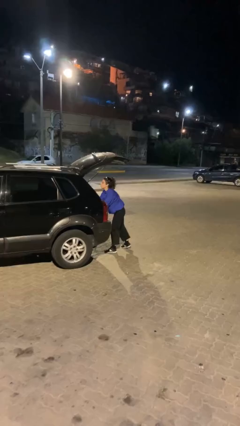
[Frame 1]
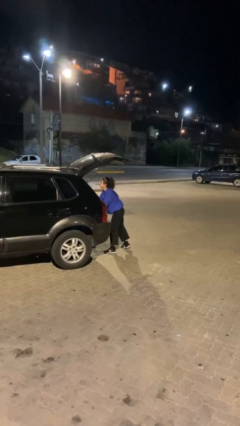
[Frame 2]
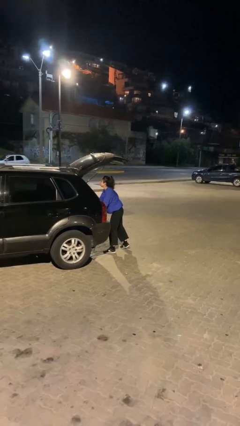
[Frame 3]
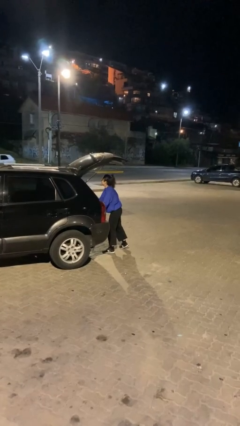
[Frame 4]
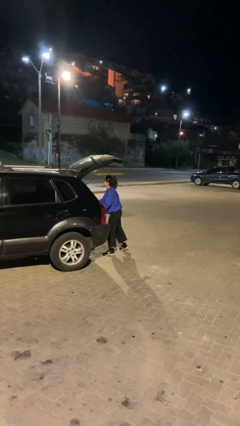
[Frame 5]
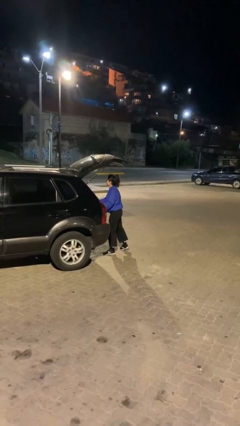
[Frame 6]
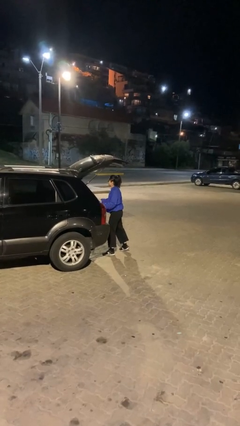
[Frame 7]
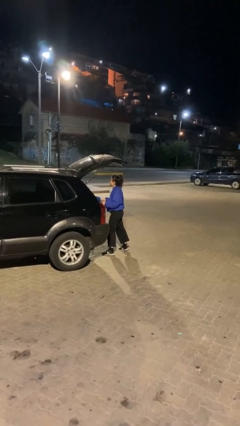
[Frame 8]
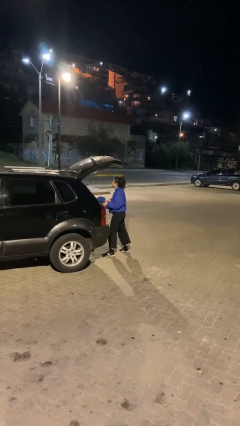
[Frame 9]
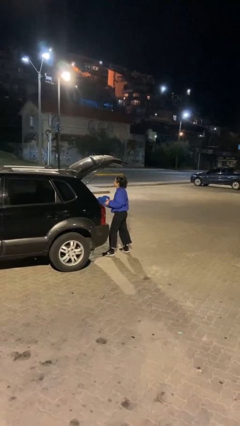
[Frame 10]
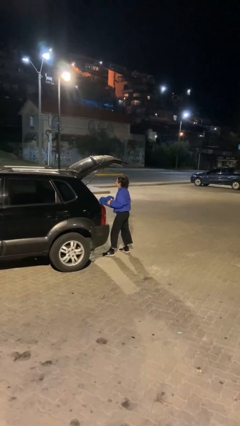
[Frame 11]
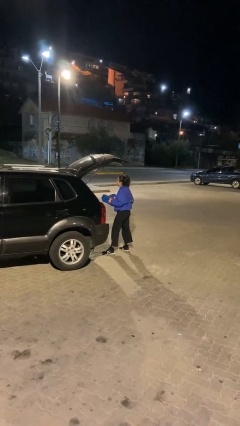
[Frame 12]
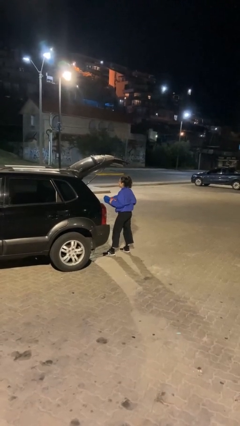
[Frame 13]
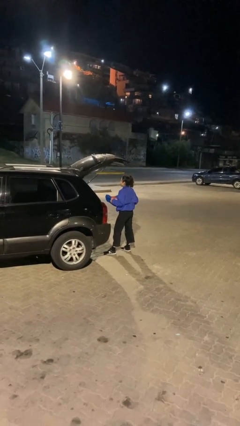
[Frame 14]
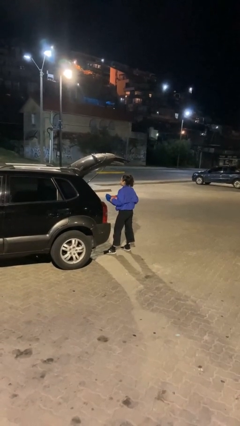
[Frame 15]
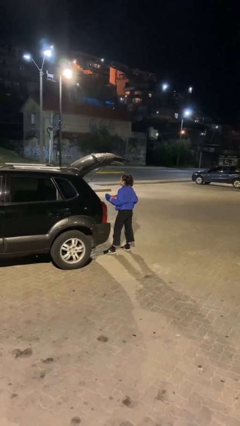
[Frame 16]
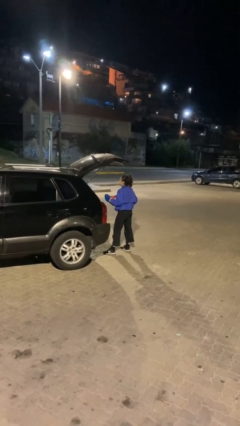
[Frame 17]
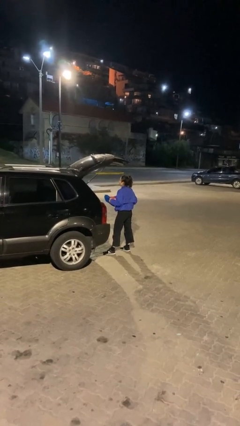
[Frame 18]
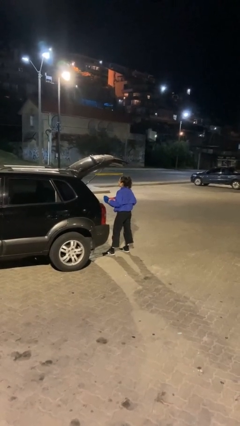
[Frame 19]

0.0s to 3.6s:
person unloads car

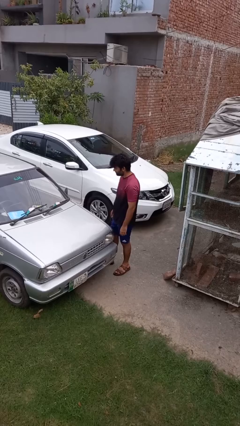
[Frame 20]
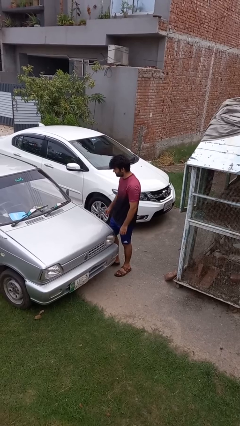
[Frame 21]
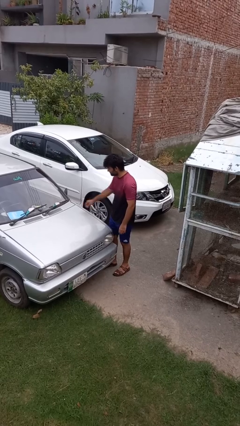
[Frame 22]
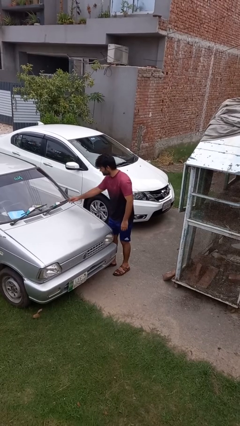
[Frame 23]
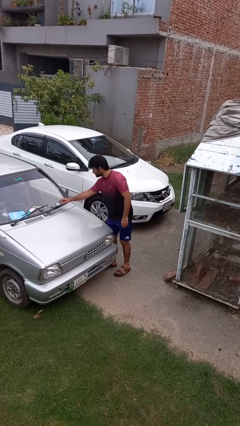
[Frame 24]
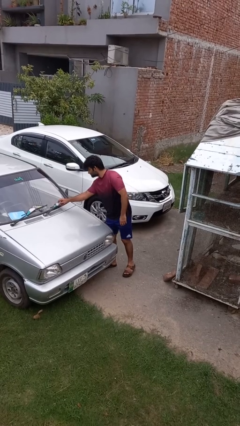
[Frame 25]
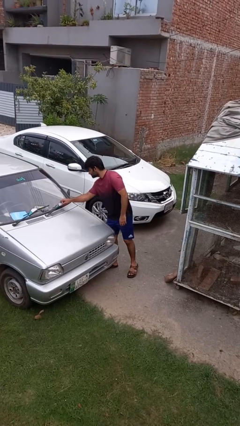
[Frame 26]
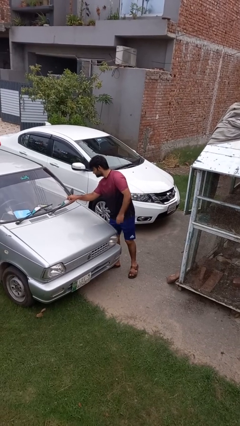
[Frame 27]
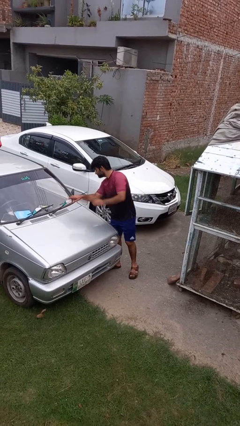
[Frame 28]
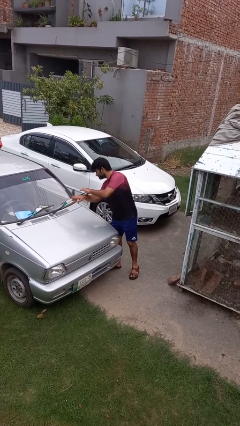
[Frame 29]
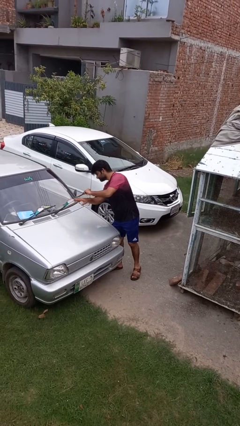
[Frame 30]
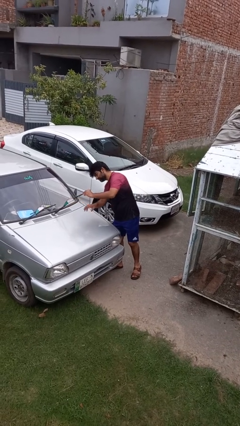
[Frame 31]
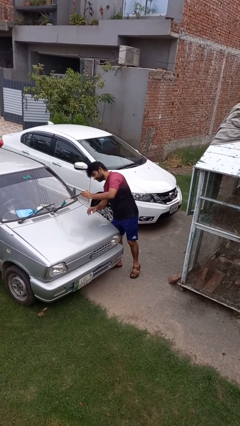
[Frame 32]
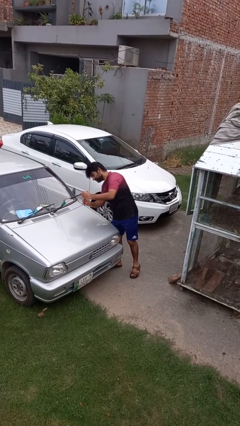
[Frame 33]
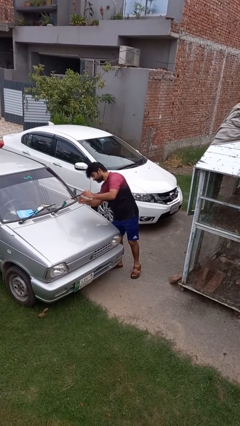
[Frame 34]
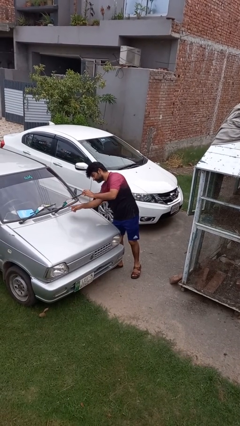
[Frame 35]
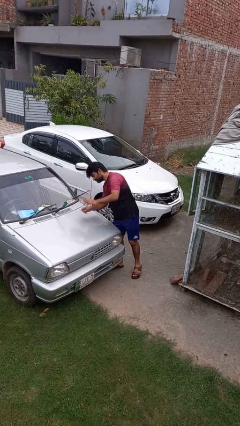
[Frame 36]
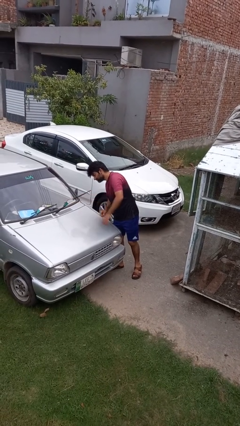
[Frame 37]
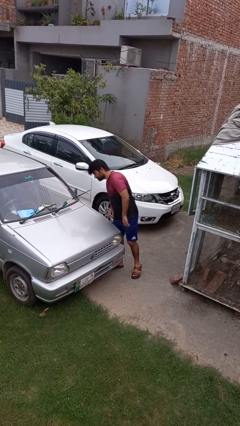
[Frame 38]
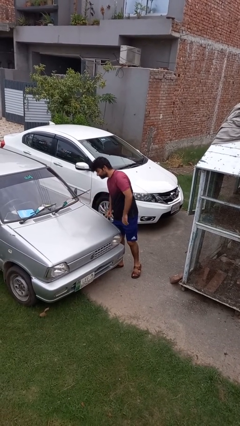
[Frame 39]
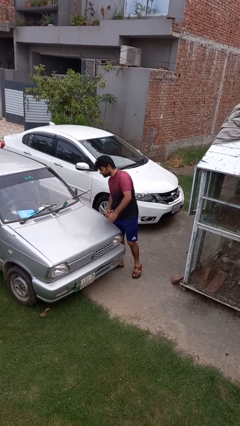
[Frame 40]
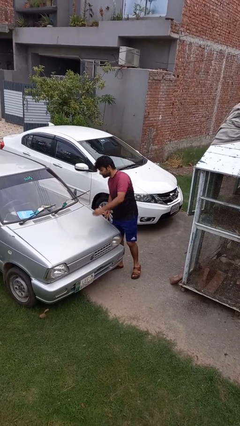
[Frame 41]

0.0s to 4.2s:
person flips up car wipers

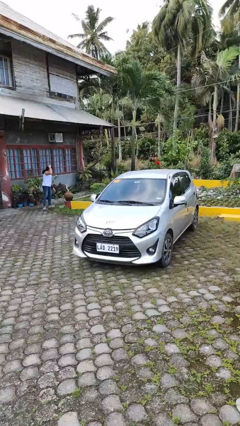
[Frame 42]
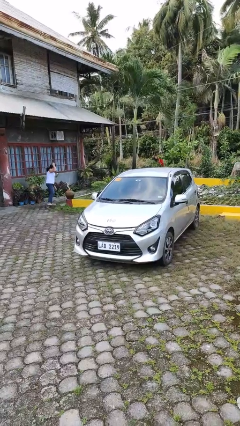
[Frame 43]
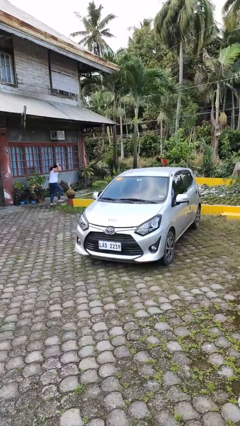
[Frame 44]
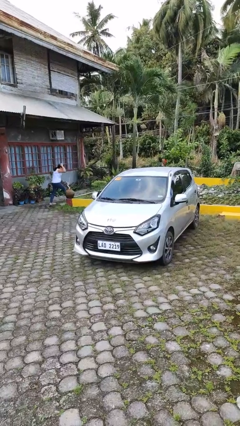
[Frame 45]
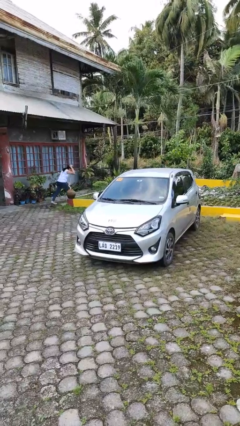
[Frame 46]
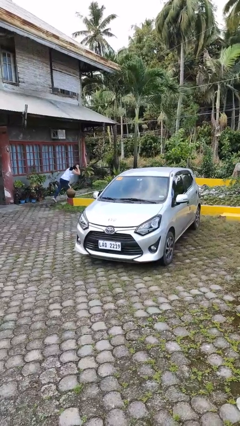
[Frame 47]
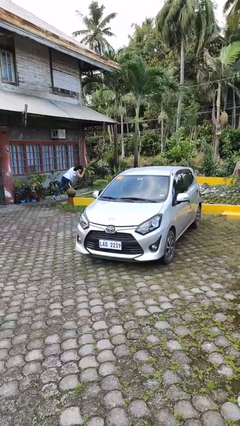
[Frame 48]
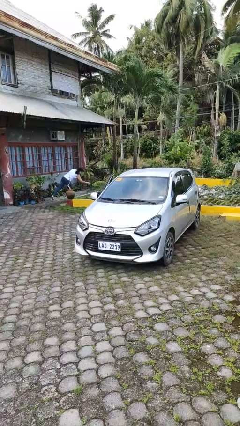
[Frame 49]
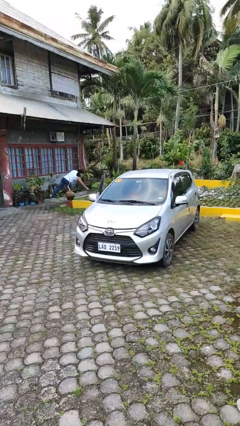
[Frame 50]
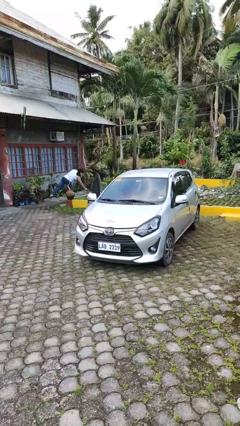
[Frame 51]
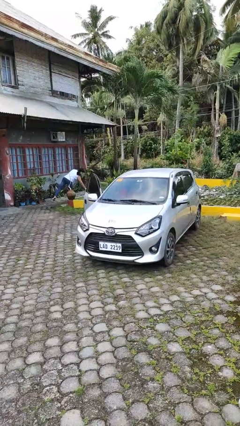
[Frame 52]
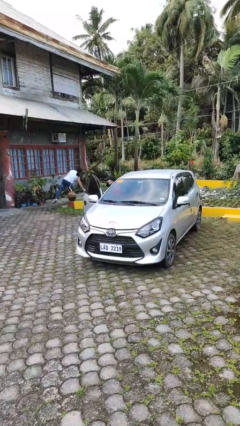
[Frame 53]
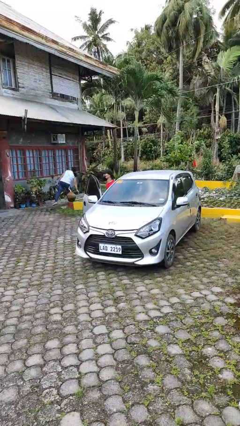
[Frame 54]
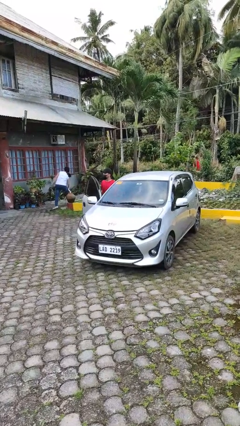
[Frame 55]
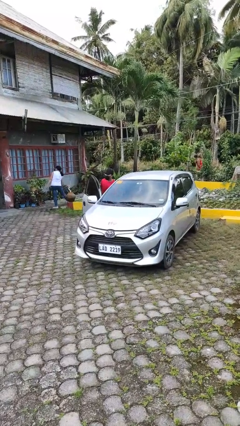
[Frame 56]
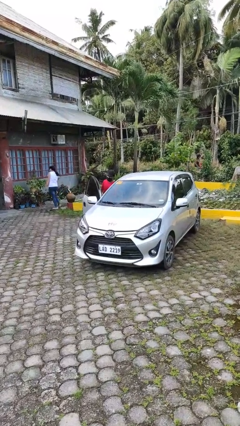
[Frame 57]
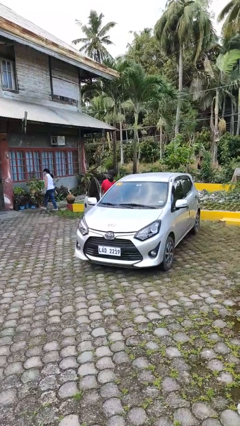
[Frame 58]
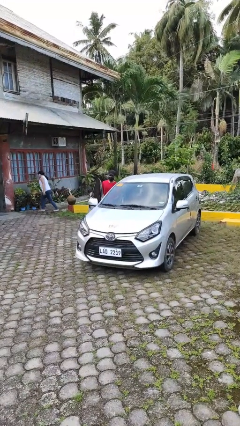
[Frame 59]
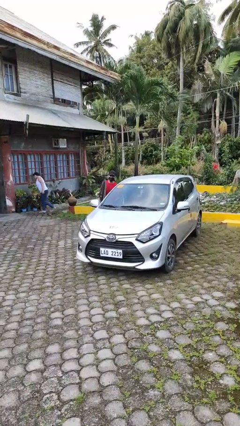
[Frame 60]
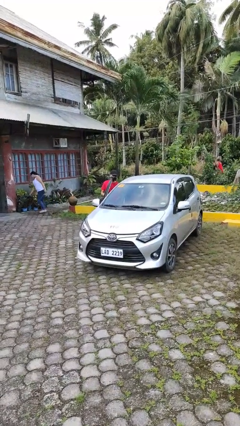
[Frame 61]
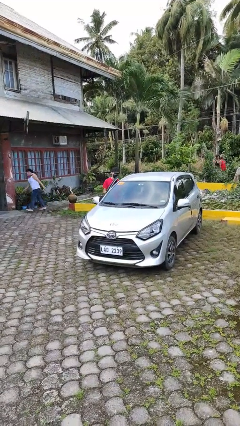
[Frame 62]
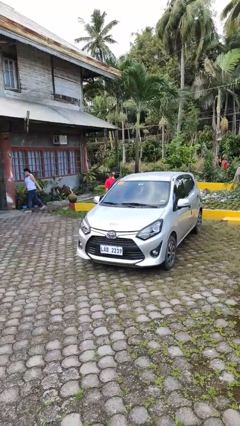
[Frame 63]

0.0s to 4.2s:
car drops off person

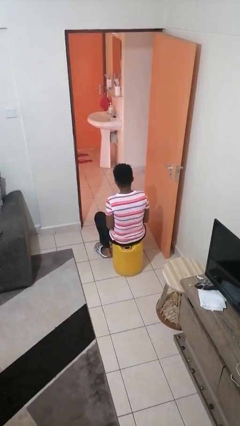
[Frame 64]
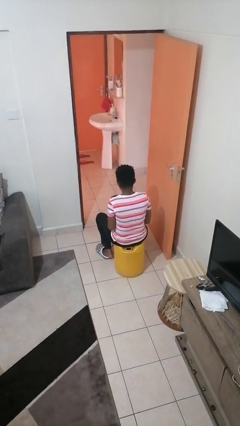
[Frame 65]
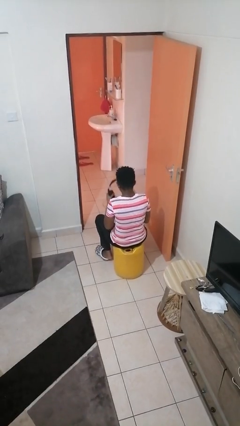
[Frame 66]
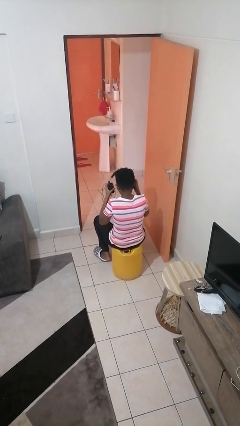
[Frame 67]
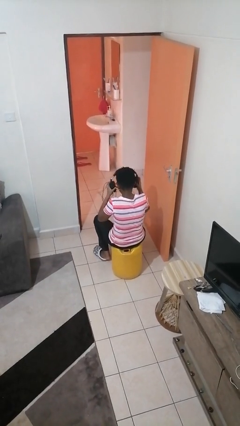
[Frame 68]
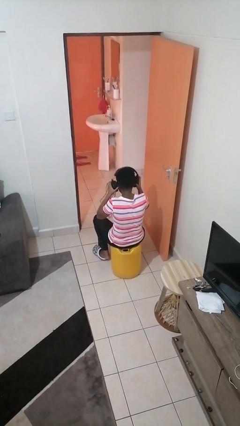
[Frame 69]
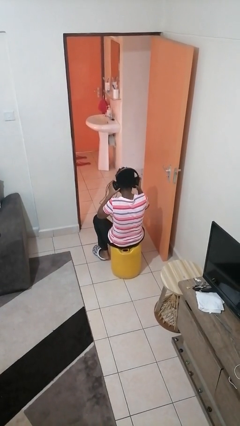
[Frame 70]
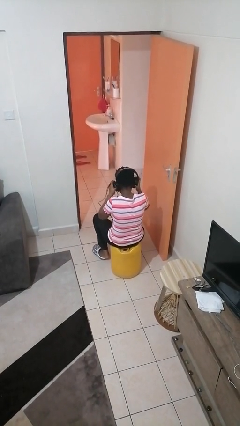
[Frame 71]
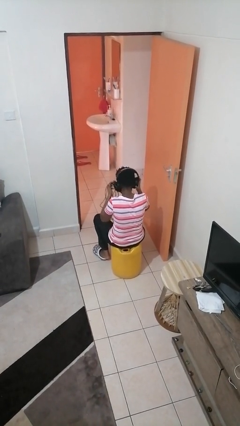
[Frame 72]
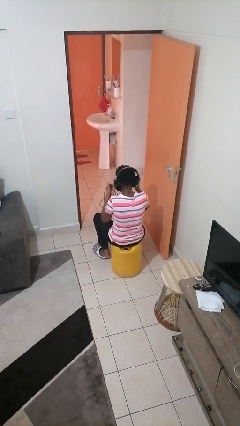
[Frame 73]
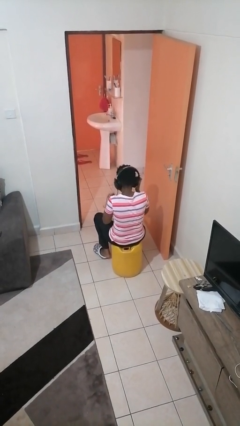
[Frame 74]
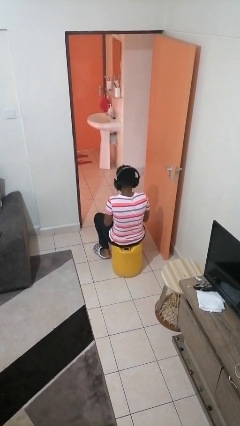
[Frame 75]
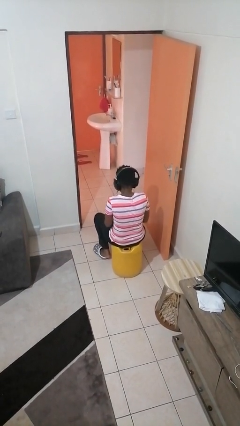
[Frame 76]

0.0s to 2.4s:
person puts on headphones

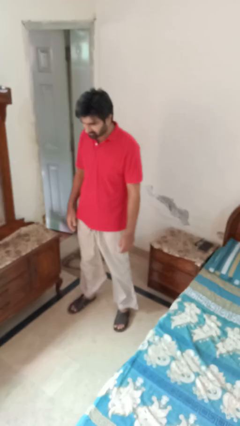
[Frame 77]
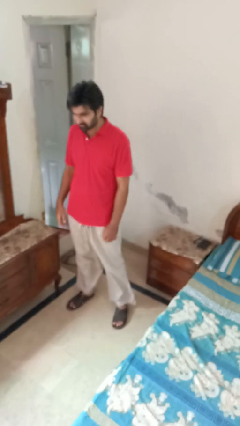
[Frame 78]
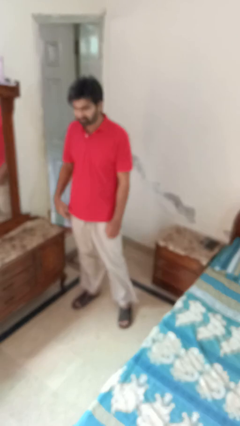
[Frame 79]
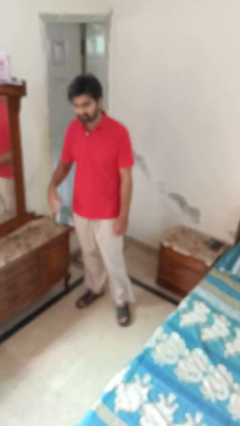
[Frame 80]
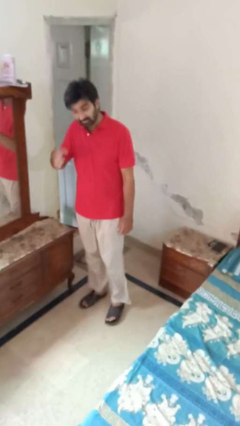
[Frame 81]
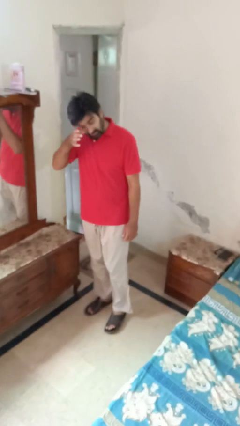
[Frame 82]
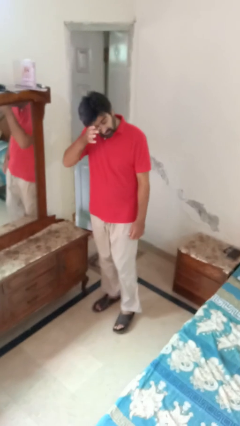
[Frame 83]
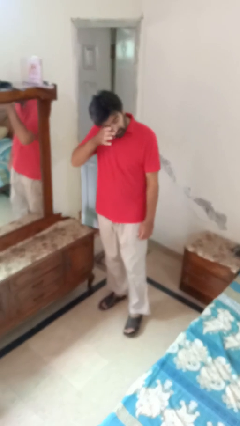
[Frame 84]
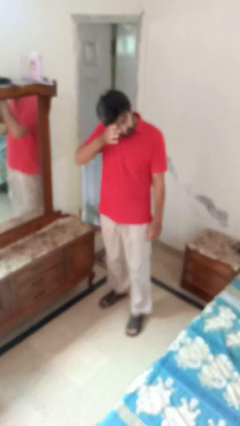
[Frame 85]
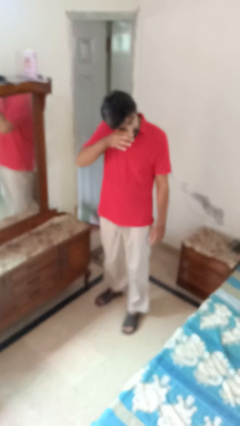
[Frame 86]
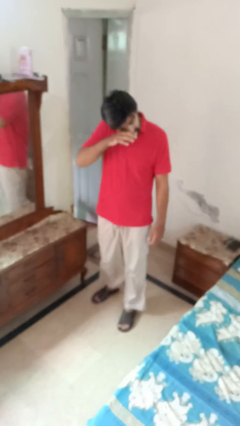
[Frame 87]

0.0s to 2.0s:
person rubs eyes

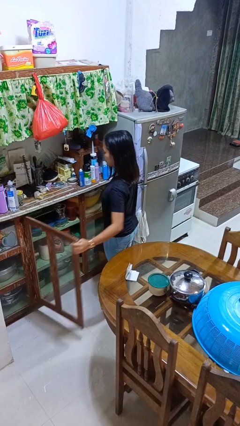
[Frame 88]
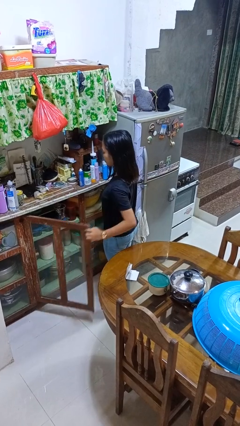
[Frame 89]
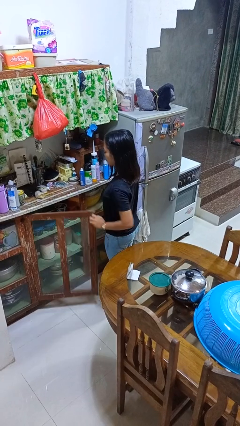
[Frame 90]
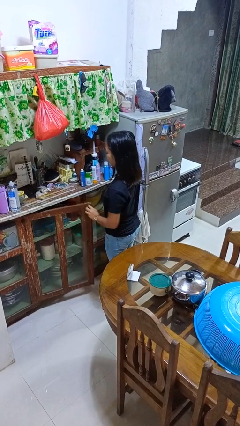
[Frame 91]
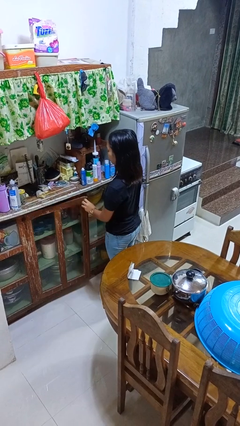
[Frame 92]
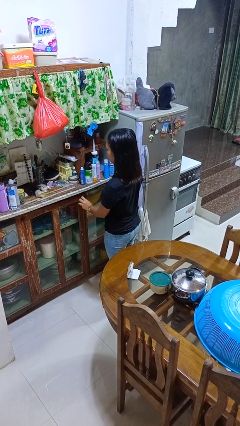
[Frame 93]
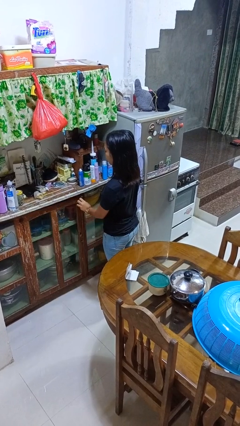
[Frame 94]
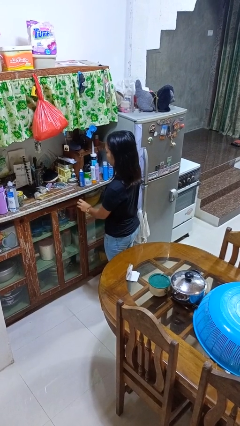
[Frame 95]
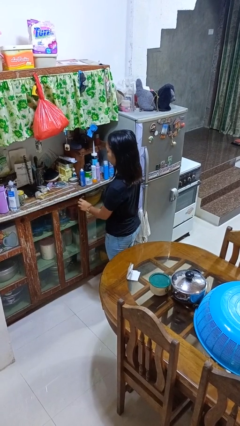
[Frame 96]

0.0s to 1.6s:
person closes cabinet
